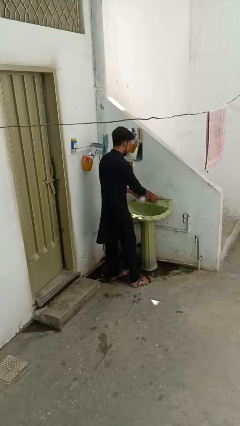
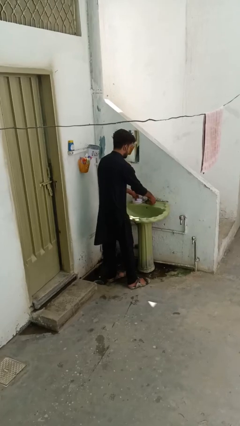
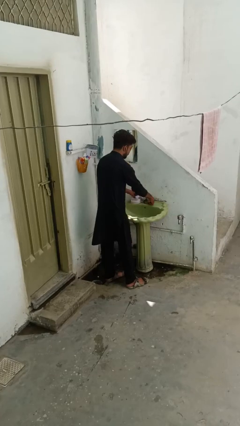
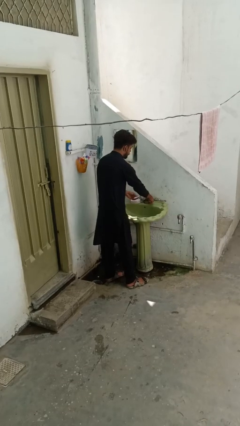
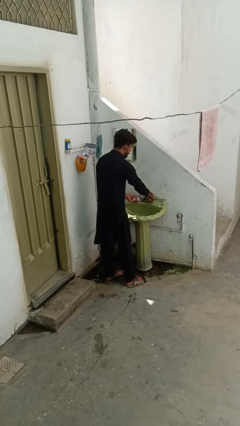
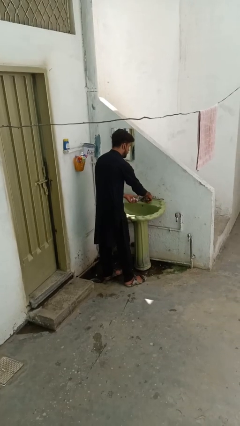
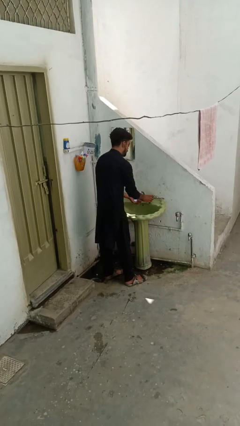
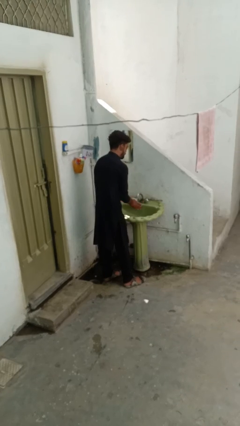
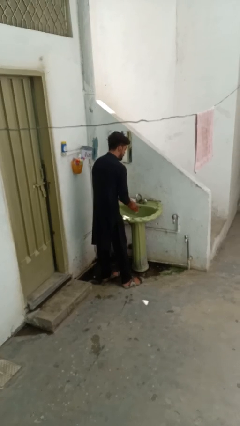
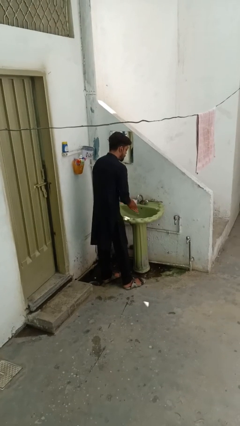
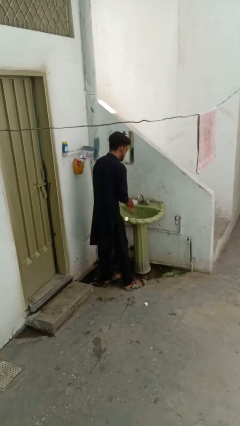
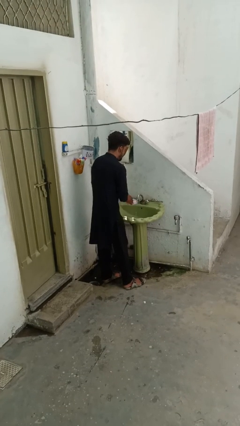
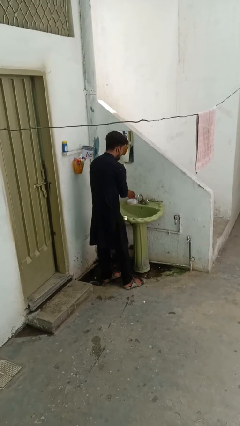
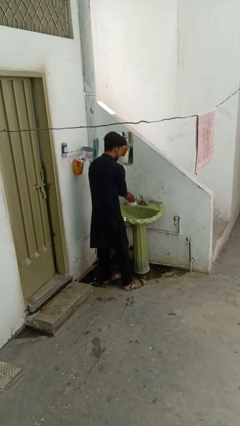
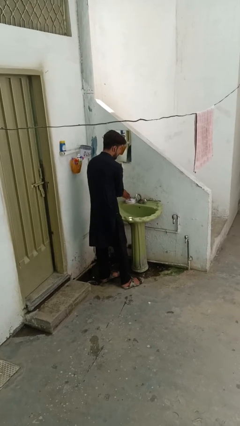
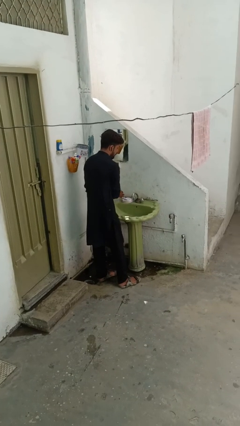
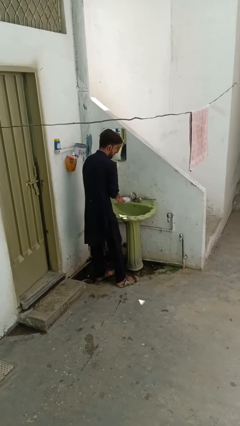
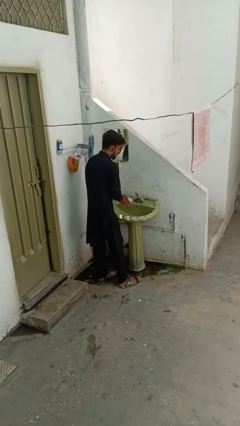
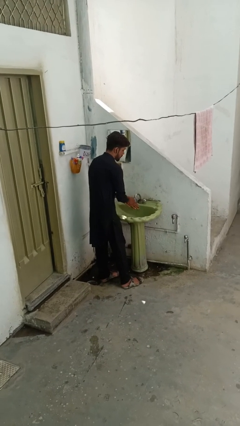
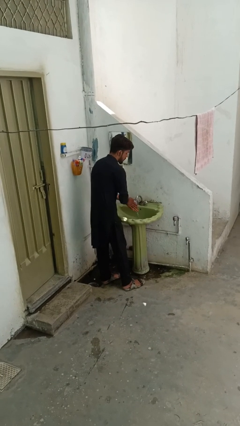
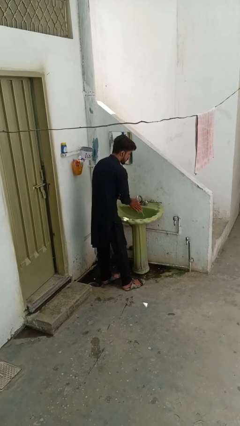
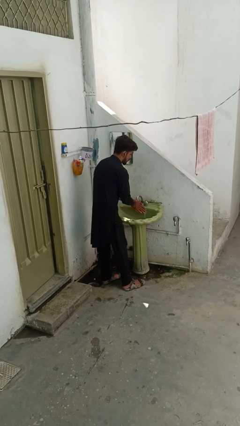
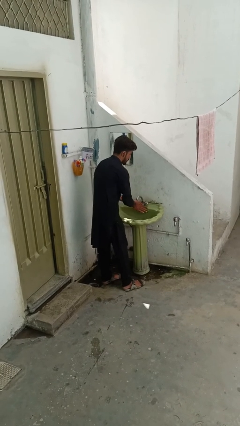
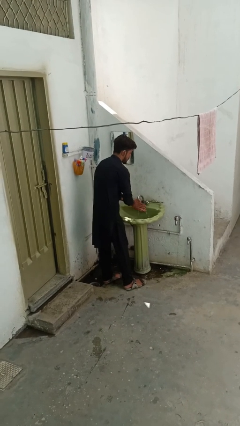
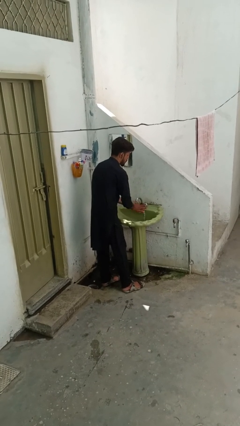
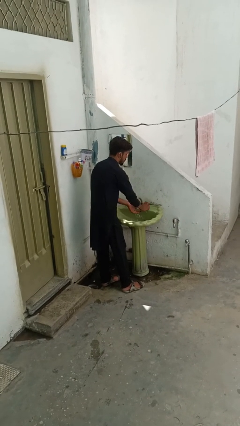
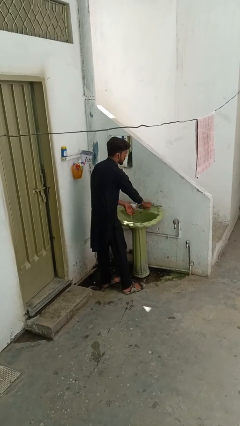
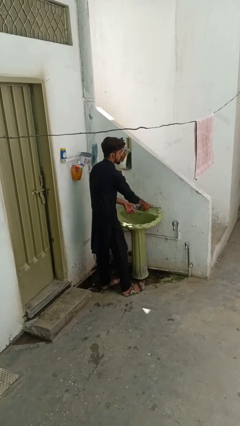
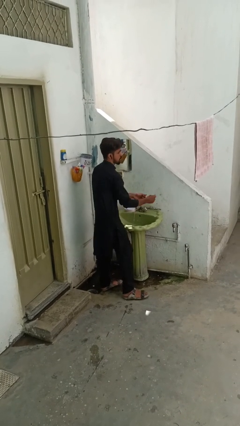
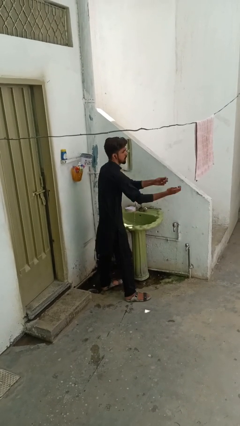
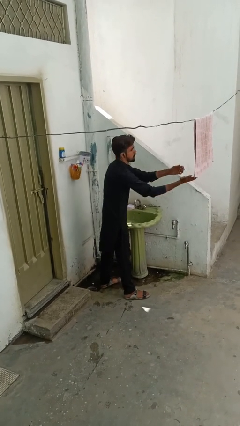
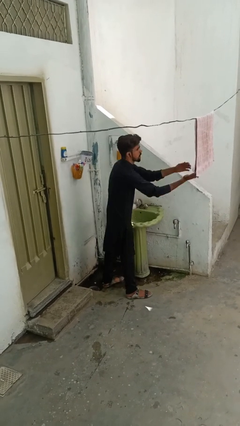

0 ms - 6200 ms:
person washes hands

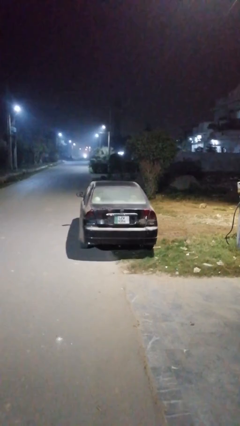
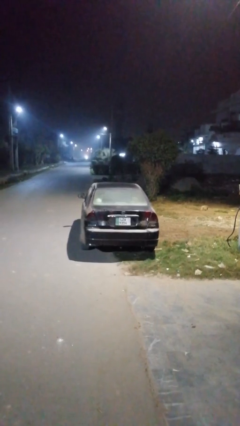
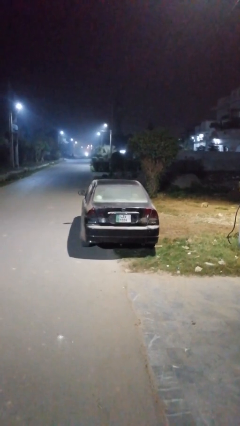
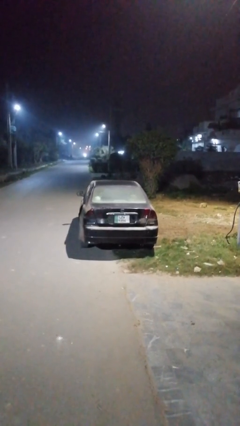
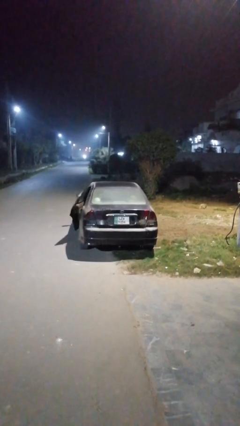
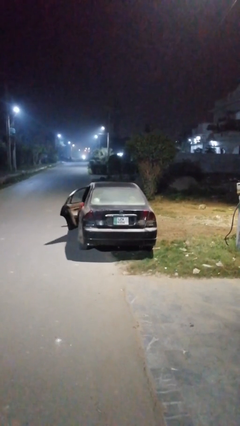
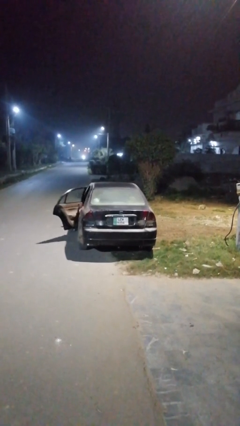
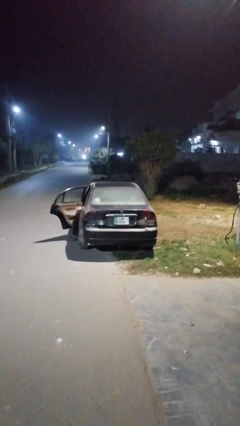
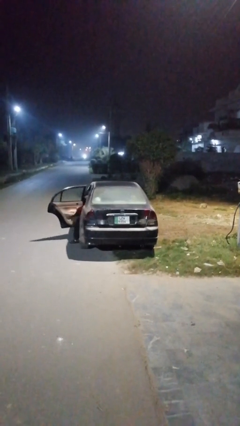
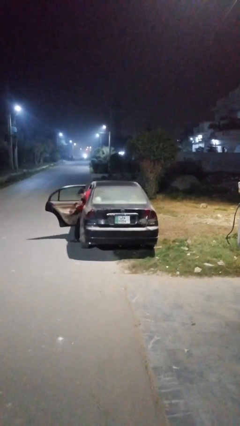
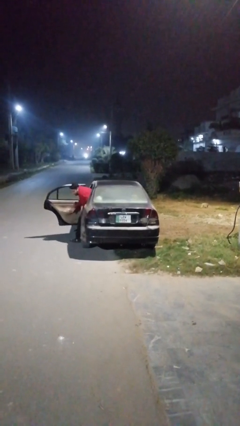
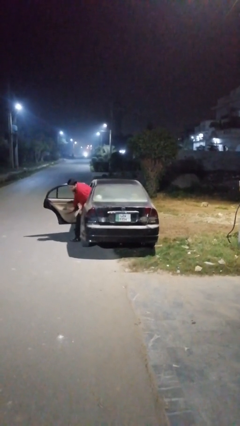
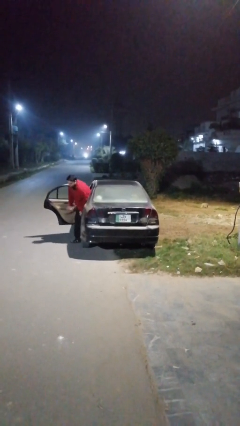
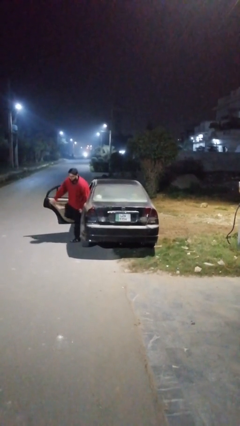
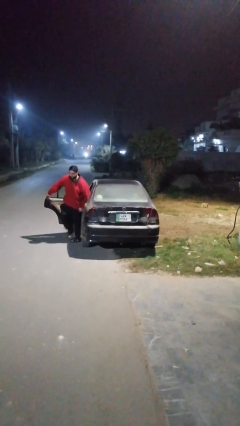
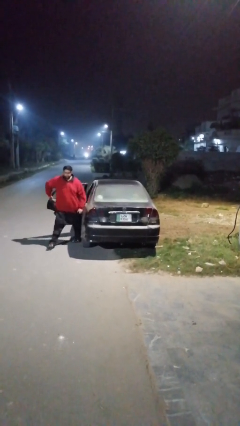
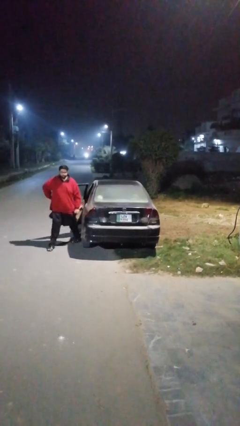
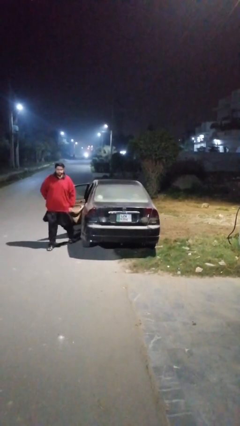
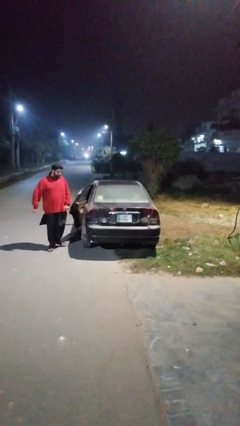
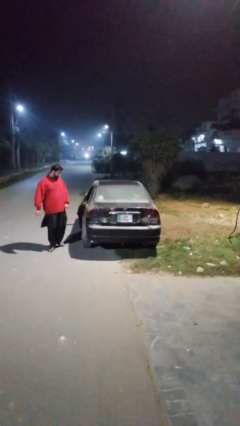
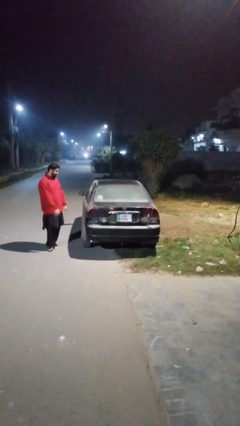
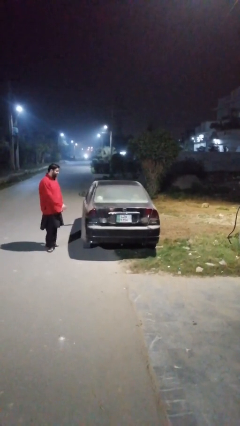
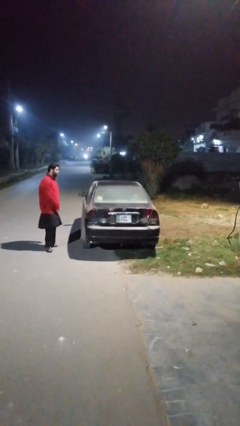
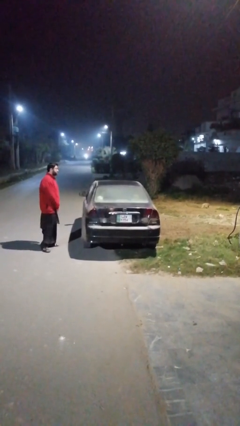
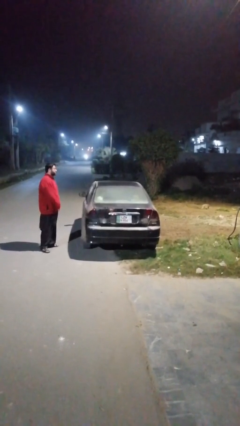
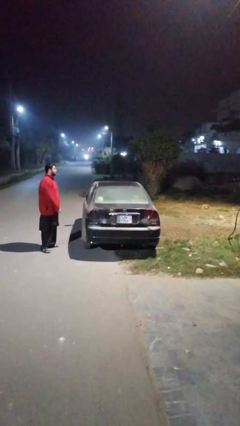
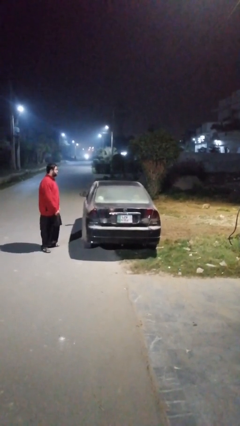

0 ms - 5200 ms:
car drops off person

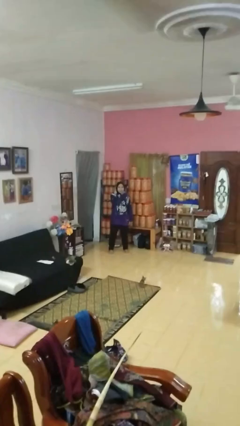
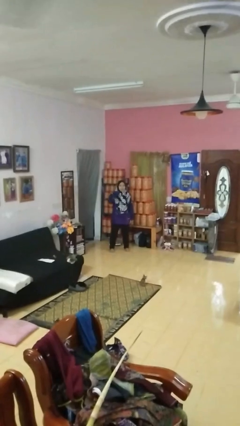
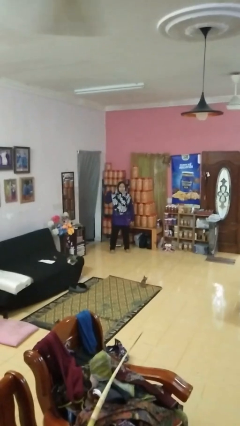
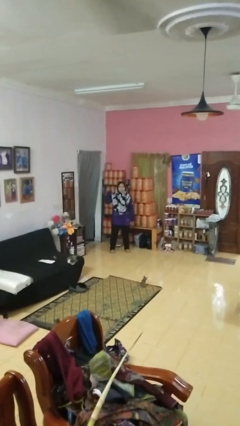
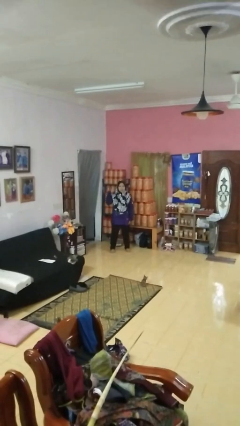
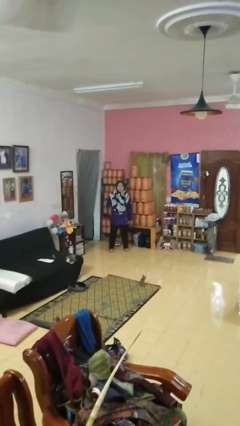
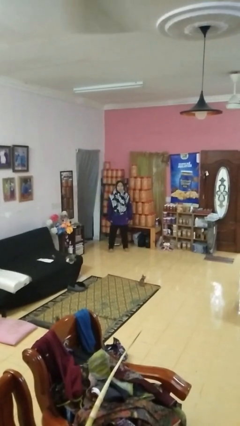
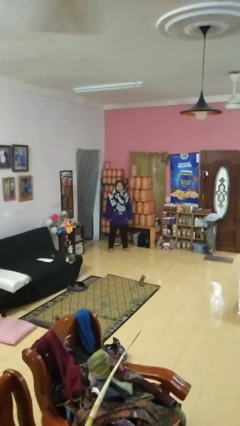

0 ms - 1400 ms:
person gestures cut

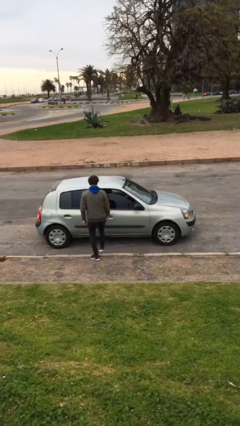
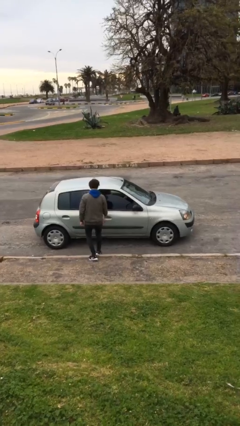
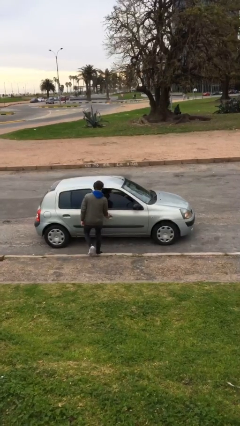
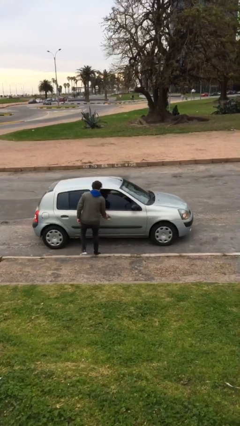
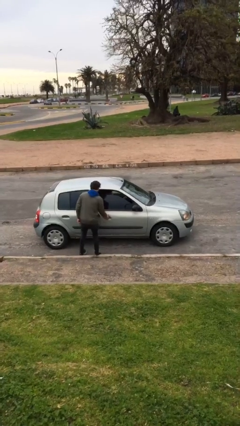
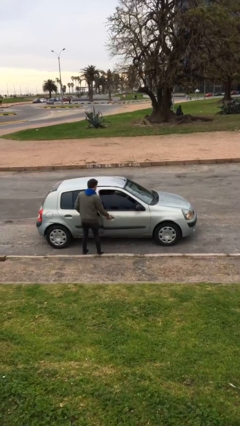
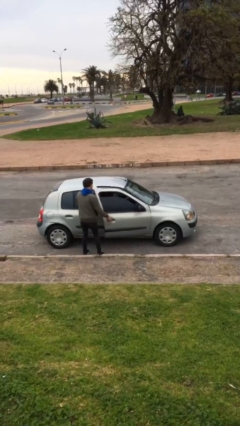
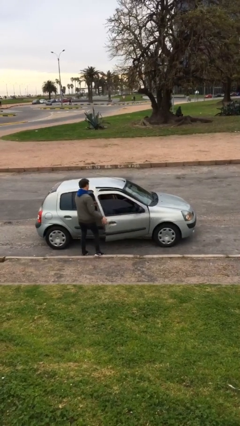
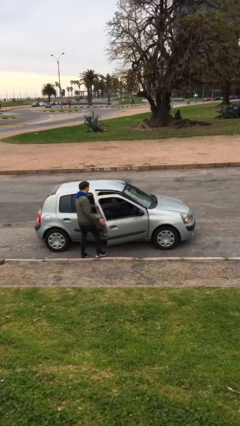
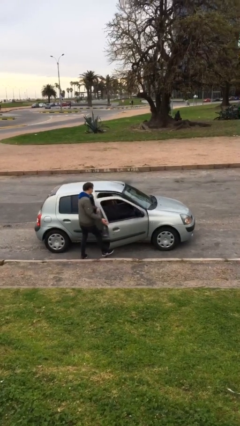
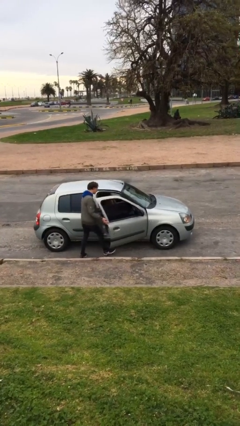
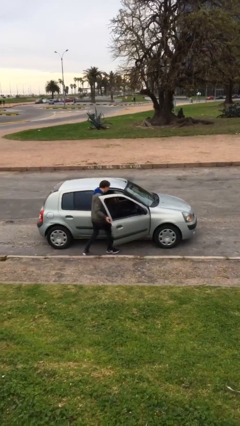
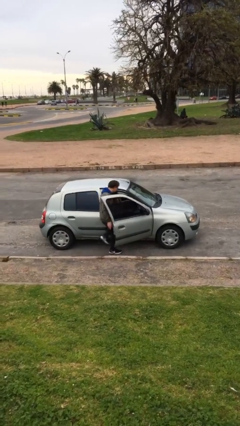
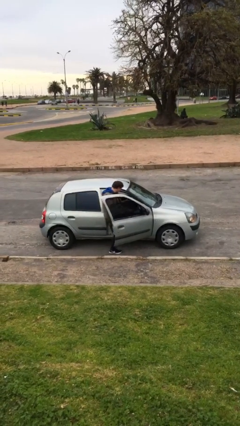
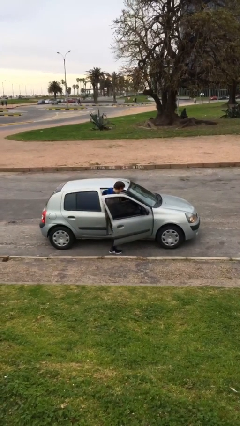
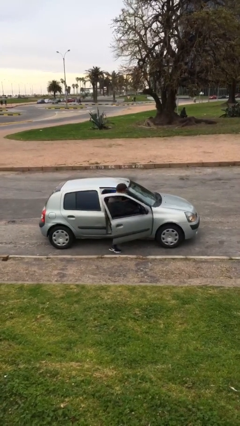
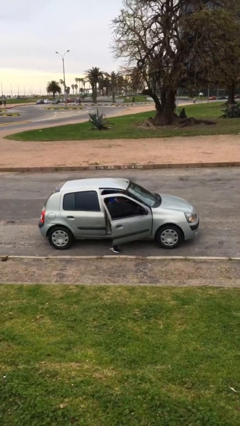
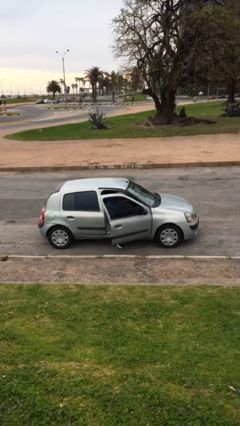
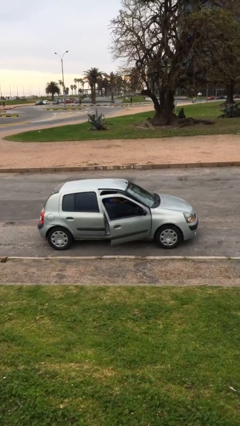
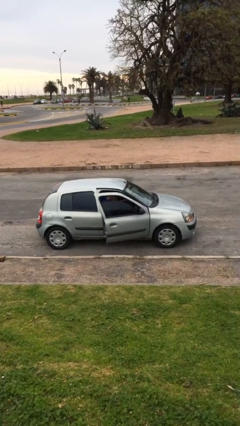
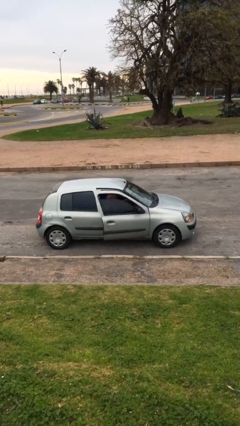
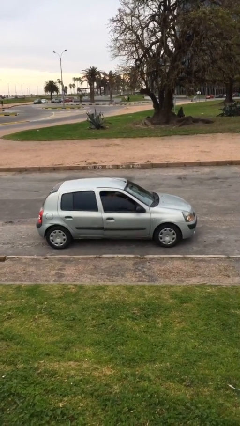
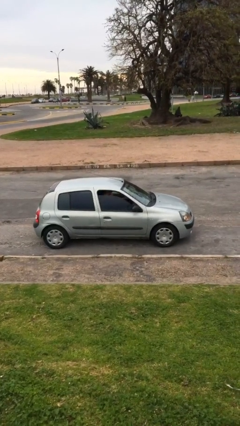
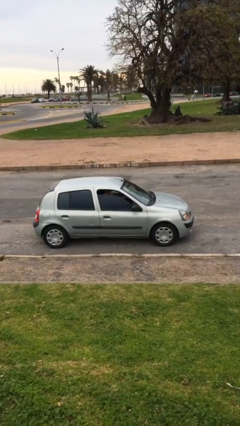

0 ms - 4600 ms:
car picks up person

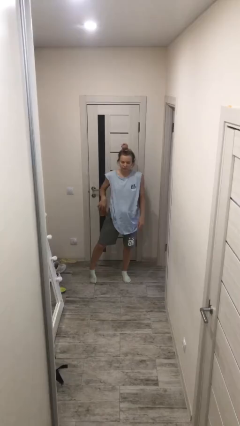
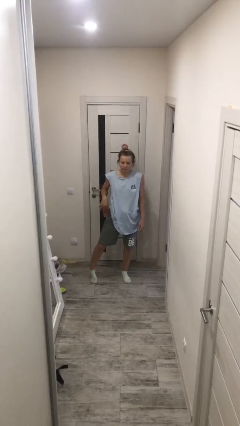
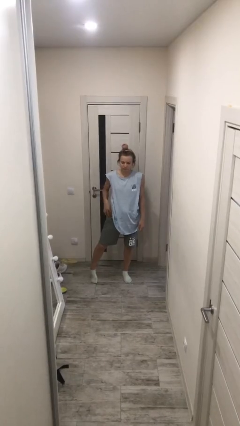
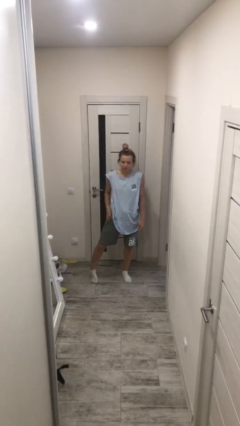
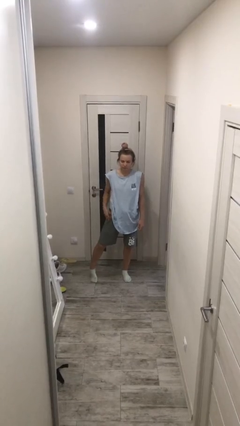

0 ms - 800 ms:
person puts phone into pocket
